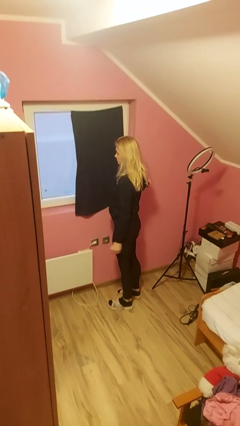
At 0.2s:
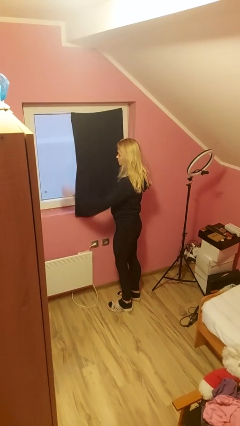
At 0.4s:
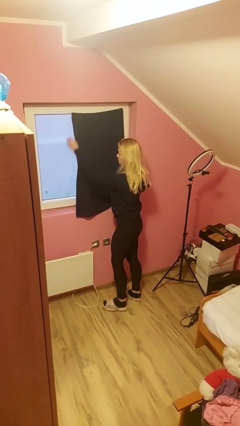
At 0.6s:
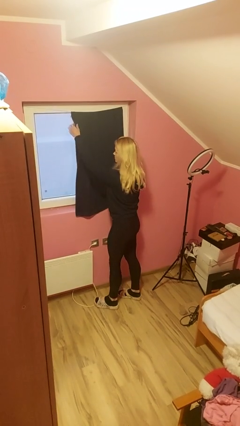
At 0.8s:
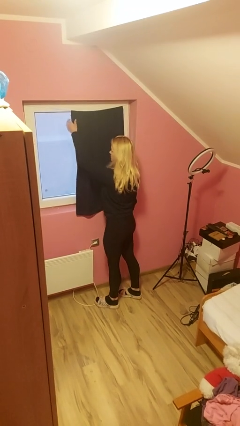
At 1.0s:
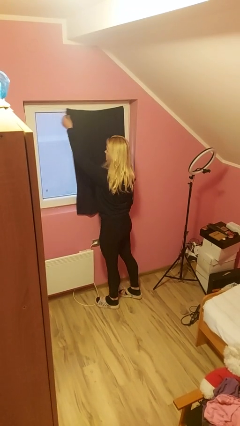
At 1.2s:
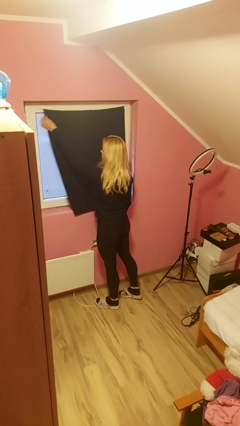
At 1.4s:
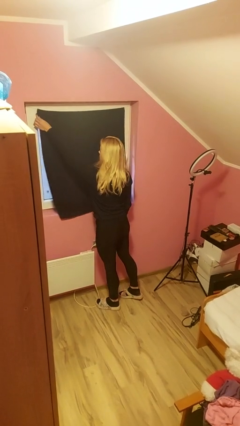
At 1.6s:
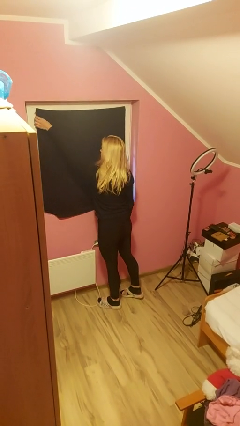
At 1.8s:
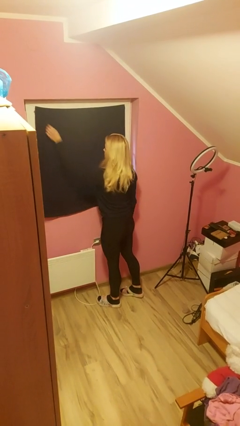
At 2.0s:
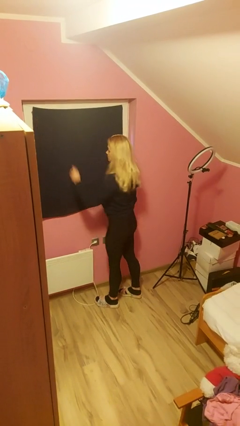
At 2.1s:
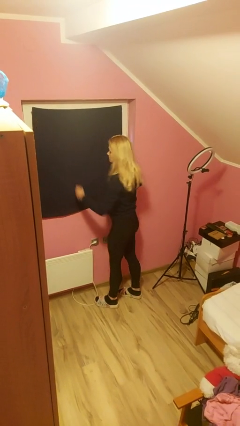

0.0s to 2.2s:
person closes curtains

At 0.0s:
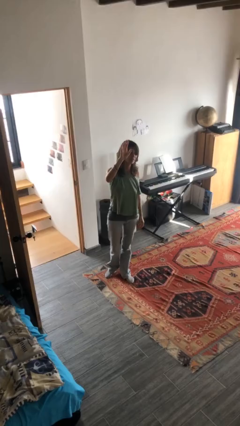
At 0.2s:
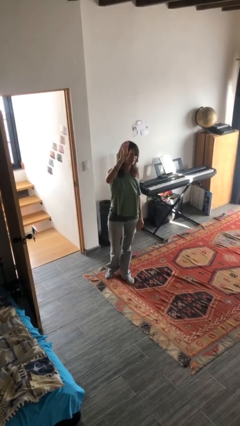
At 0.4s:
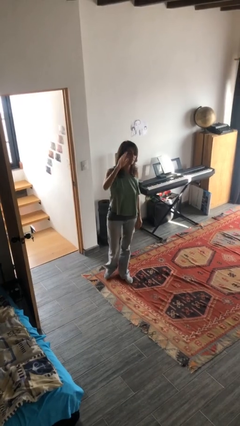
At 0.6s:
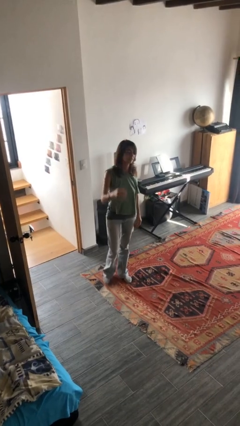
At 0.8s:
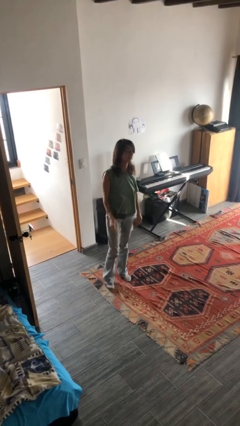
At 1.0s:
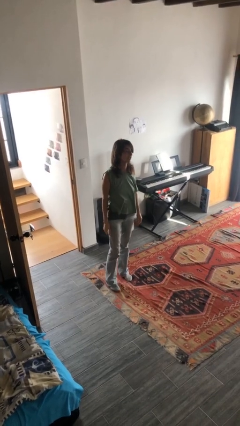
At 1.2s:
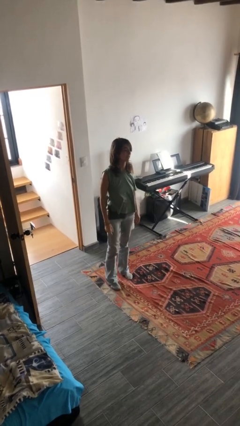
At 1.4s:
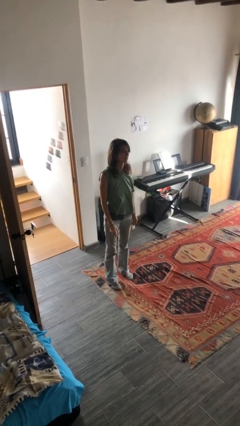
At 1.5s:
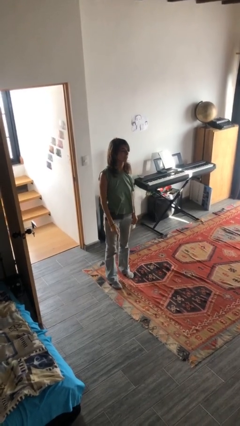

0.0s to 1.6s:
person gestures lower hand

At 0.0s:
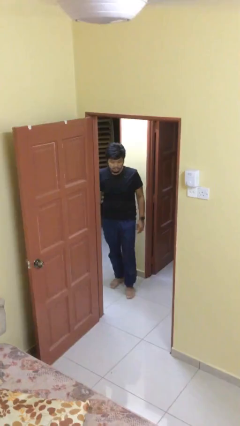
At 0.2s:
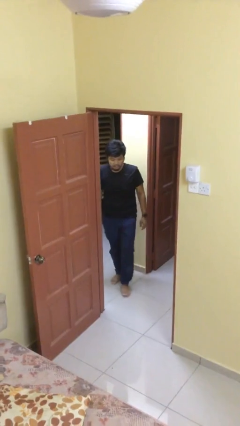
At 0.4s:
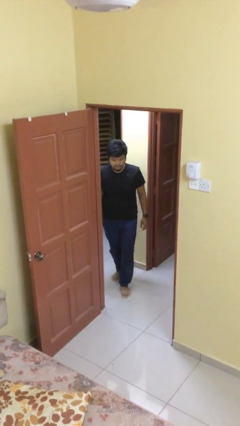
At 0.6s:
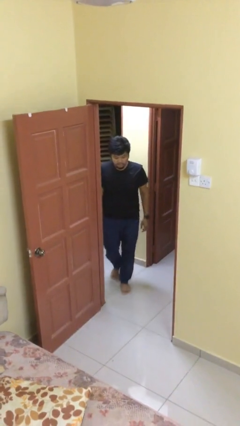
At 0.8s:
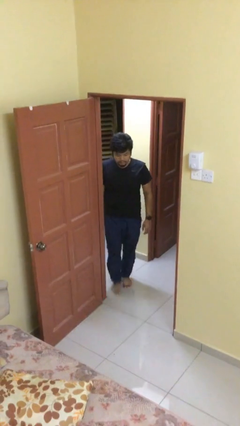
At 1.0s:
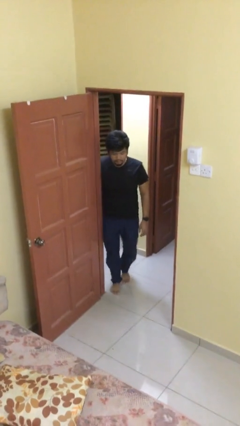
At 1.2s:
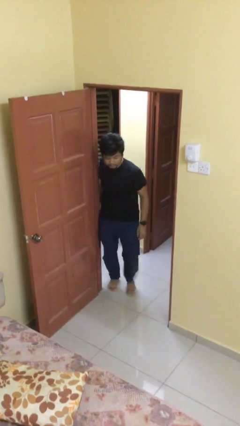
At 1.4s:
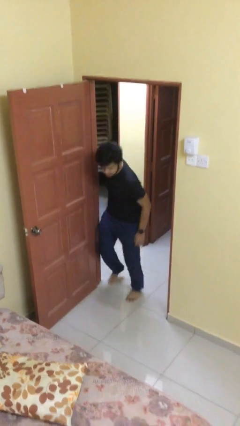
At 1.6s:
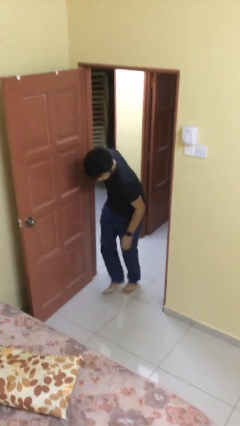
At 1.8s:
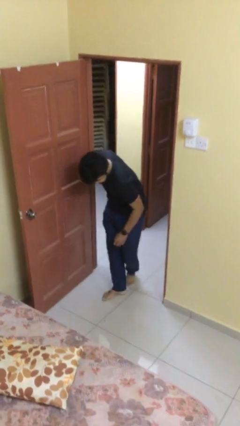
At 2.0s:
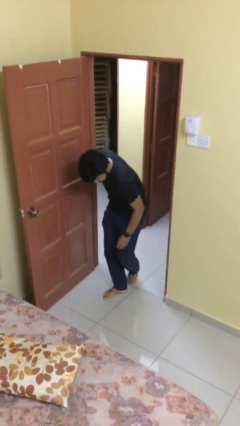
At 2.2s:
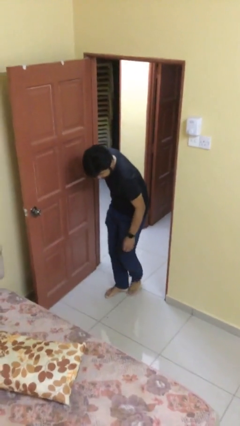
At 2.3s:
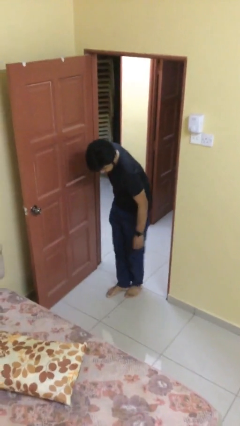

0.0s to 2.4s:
person bumps into wall

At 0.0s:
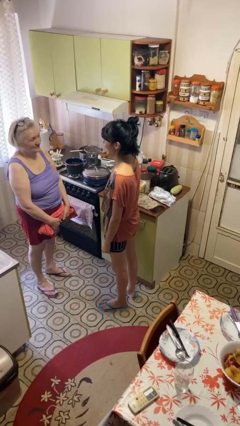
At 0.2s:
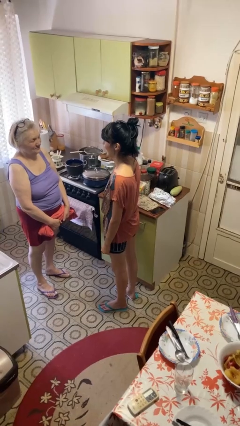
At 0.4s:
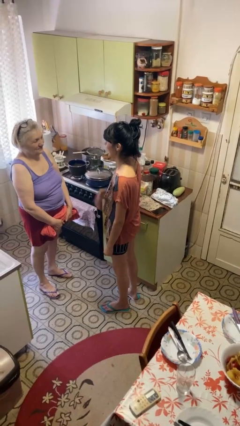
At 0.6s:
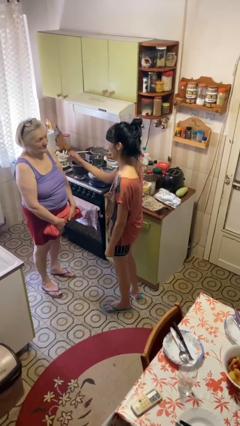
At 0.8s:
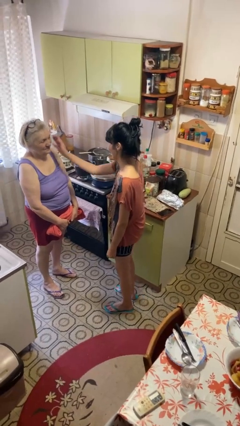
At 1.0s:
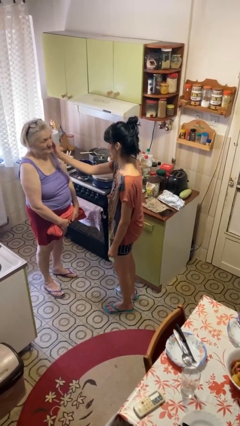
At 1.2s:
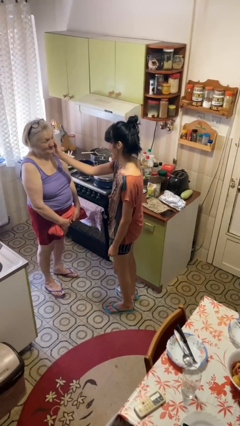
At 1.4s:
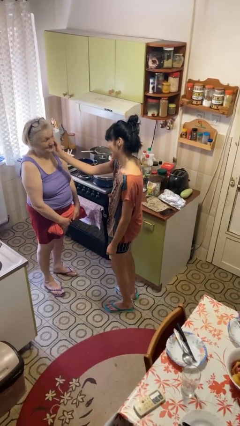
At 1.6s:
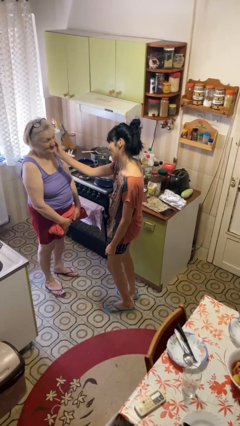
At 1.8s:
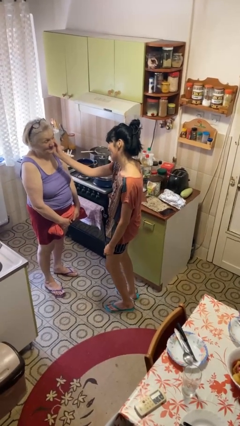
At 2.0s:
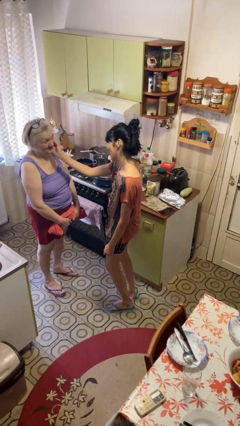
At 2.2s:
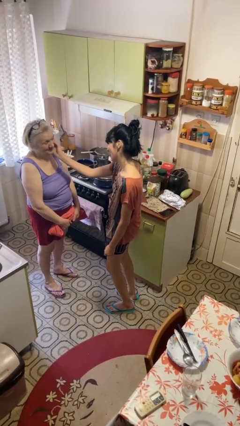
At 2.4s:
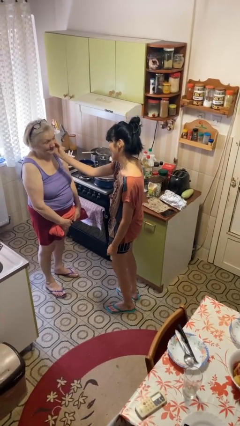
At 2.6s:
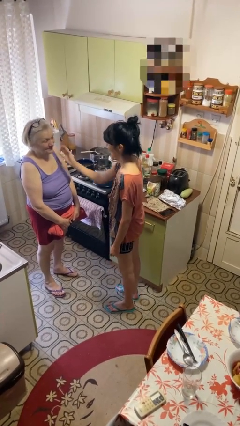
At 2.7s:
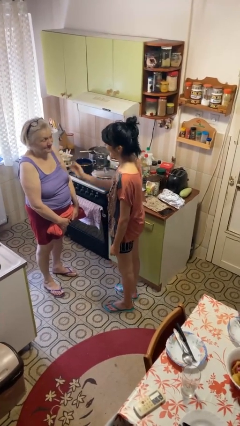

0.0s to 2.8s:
person touches face of person

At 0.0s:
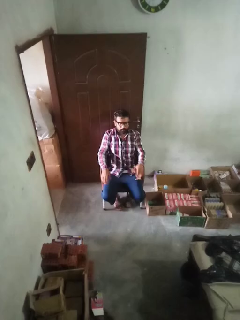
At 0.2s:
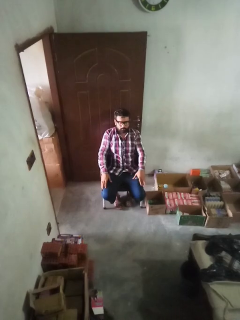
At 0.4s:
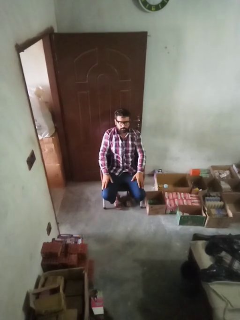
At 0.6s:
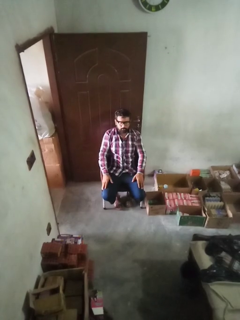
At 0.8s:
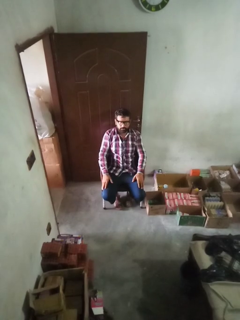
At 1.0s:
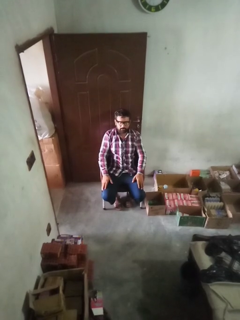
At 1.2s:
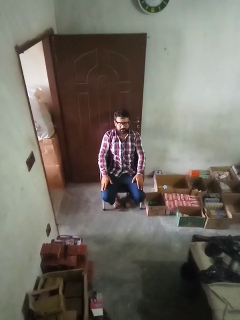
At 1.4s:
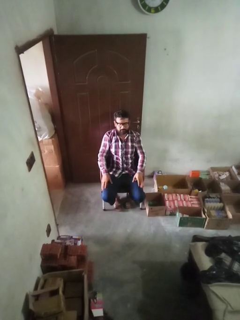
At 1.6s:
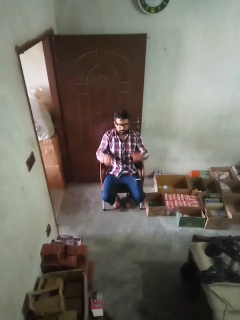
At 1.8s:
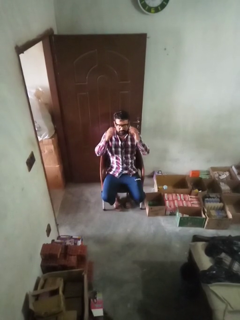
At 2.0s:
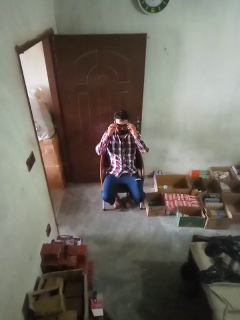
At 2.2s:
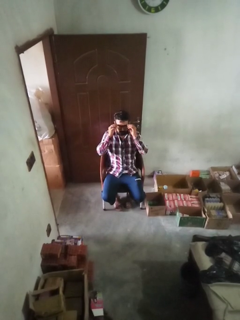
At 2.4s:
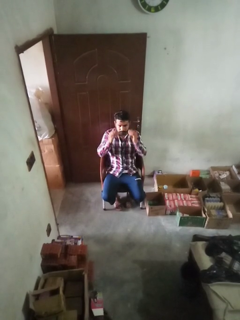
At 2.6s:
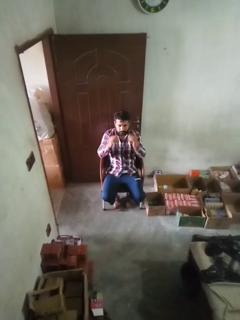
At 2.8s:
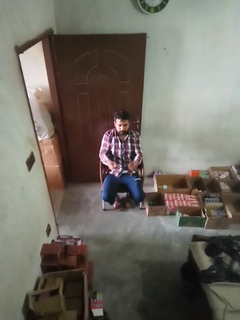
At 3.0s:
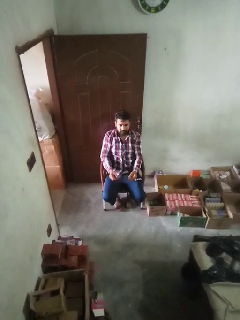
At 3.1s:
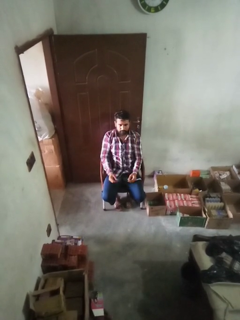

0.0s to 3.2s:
person takes off glasses

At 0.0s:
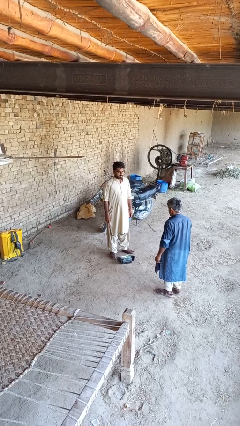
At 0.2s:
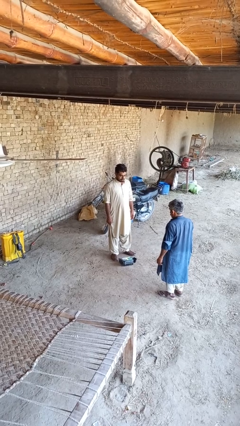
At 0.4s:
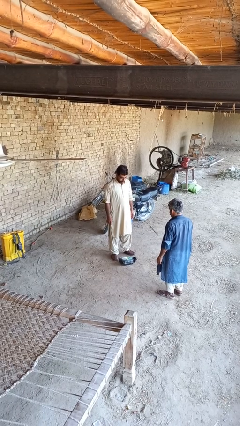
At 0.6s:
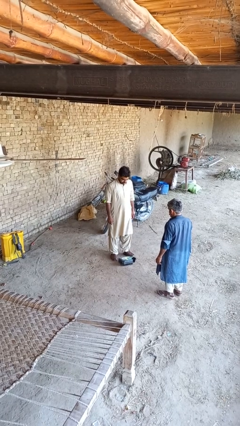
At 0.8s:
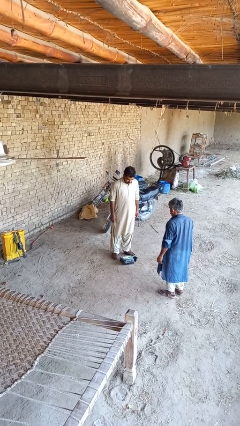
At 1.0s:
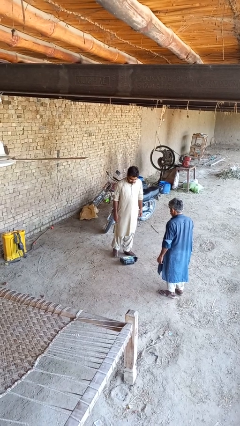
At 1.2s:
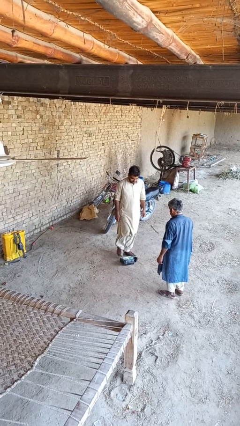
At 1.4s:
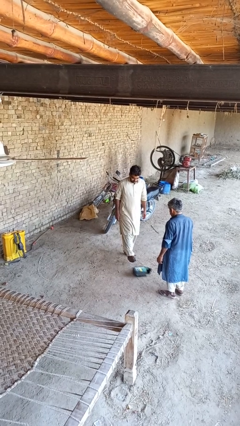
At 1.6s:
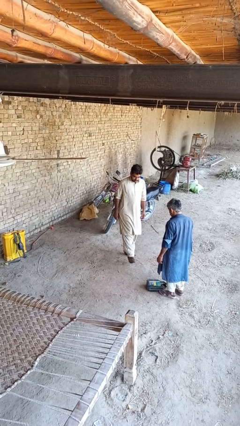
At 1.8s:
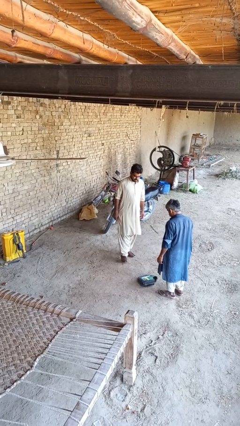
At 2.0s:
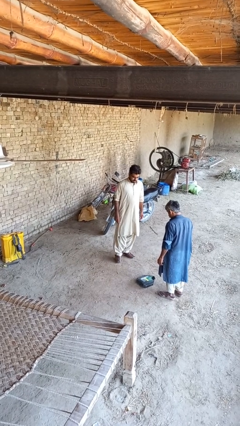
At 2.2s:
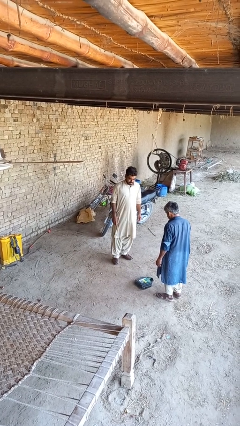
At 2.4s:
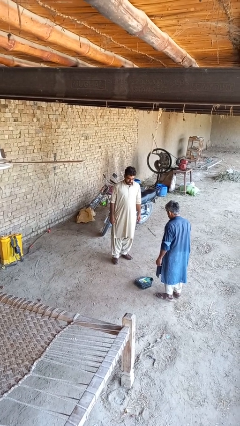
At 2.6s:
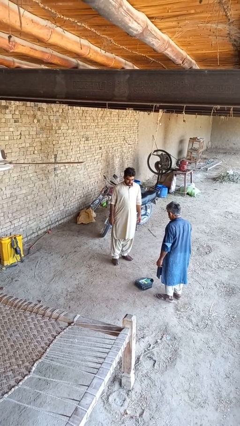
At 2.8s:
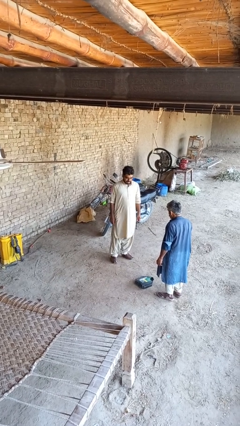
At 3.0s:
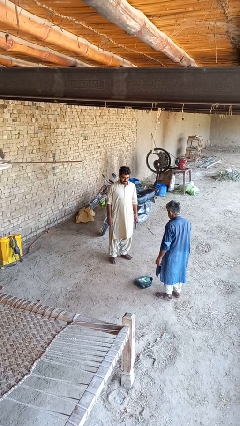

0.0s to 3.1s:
person kicks object to person

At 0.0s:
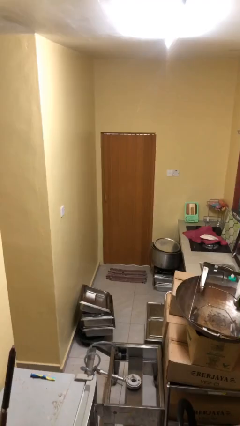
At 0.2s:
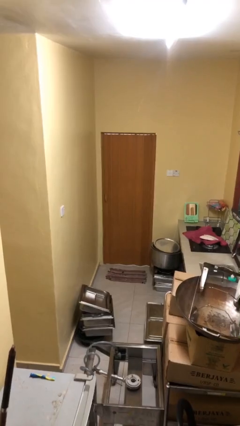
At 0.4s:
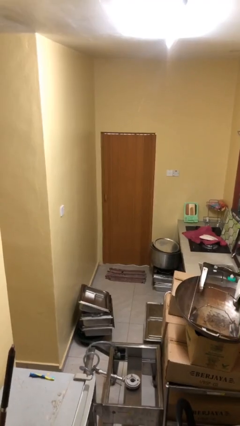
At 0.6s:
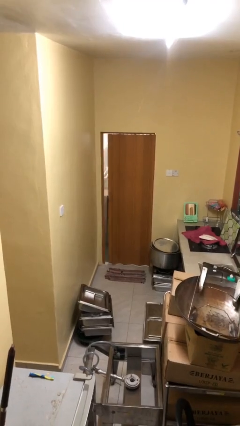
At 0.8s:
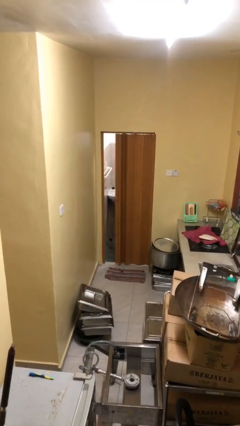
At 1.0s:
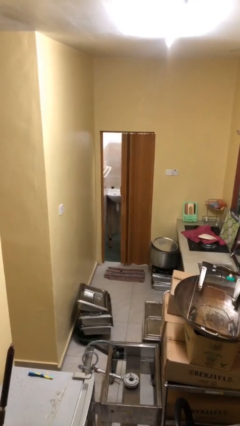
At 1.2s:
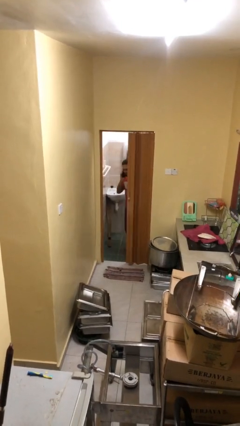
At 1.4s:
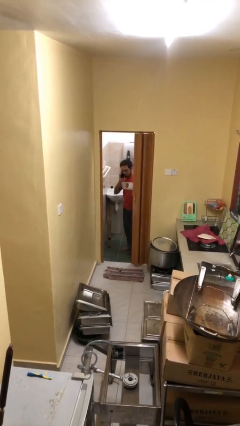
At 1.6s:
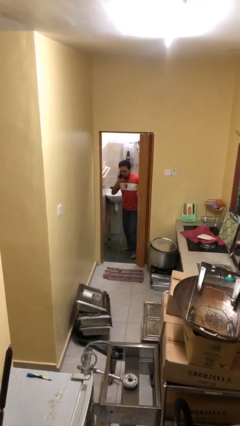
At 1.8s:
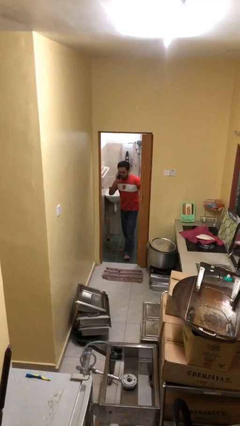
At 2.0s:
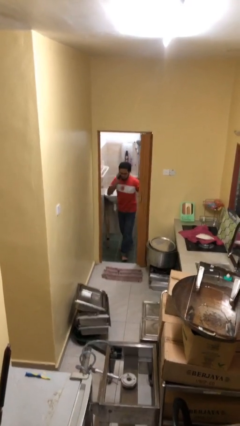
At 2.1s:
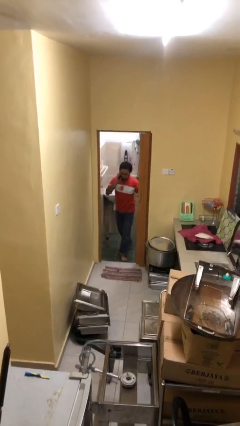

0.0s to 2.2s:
person opens facility door
